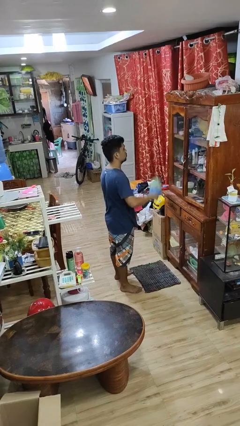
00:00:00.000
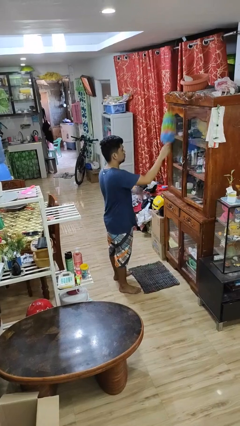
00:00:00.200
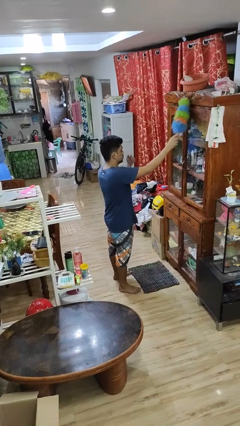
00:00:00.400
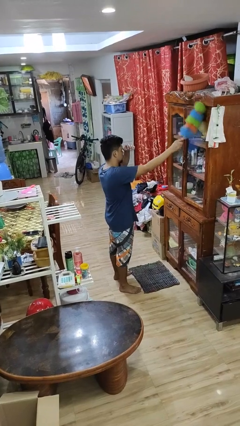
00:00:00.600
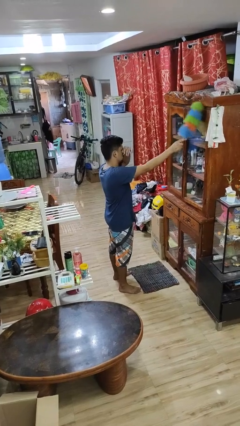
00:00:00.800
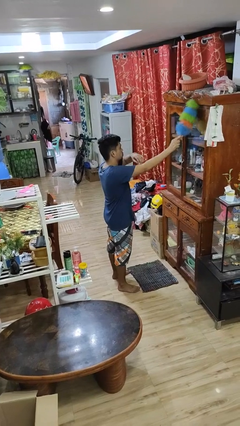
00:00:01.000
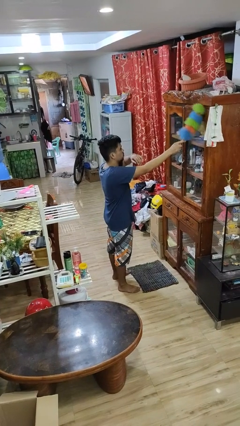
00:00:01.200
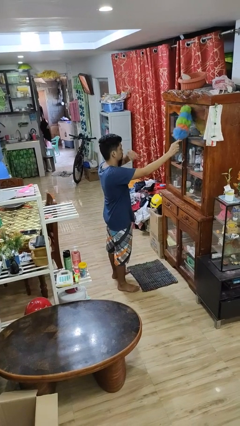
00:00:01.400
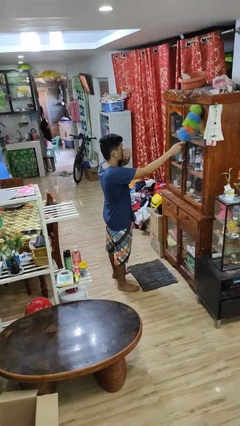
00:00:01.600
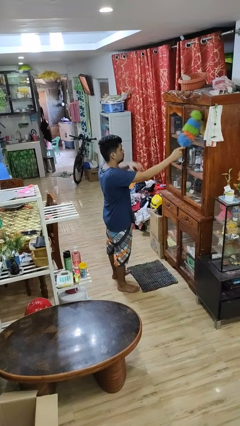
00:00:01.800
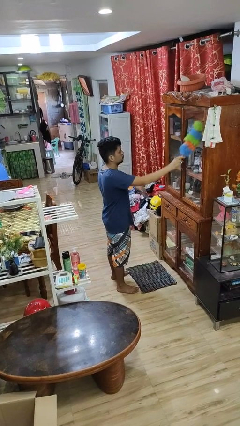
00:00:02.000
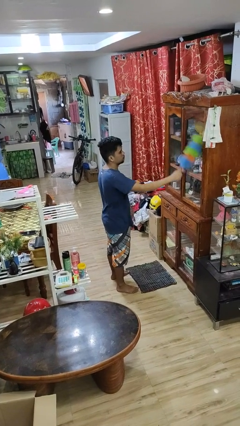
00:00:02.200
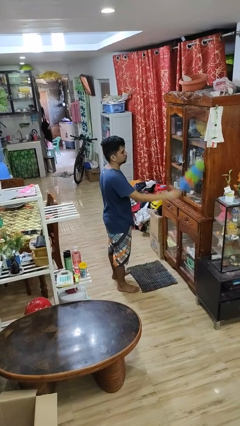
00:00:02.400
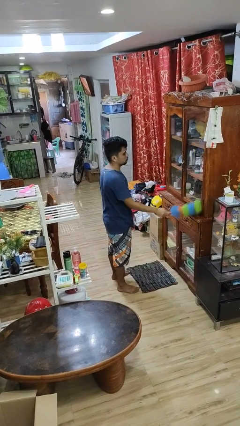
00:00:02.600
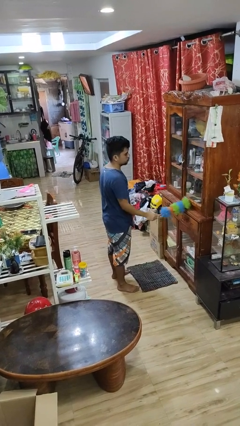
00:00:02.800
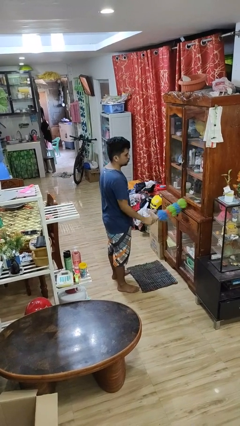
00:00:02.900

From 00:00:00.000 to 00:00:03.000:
person dusts furniture

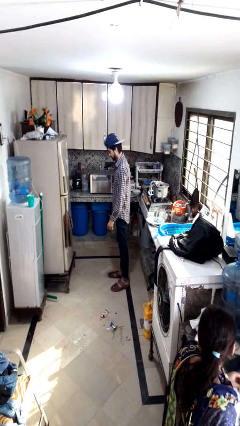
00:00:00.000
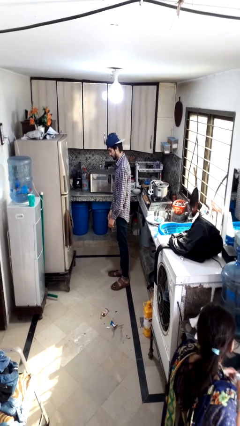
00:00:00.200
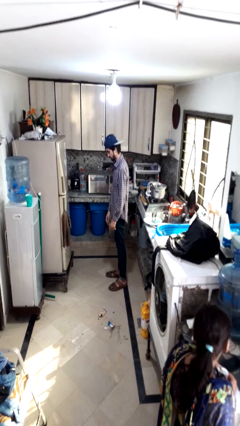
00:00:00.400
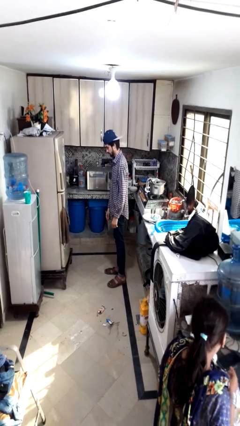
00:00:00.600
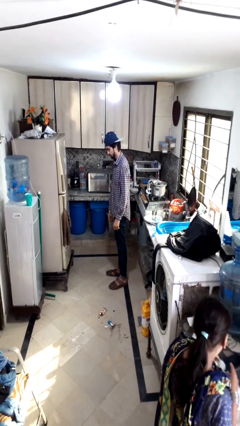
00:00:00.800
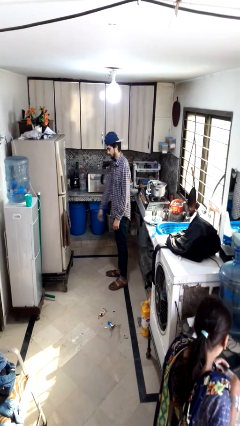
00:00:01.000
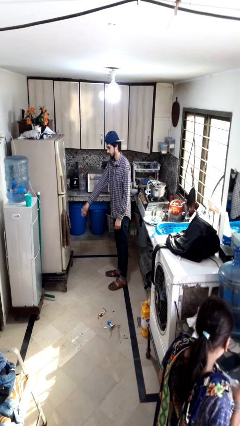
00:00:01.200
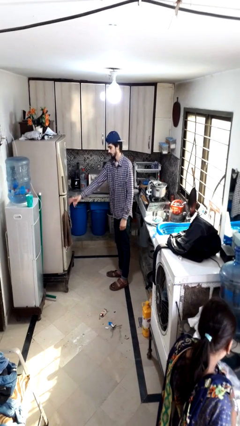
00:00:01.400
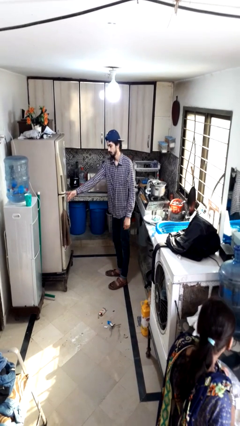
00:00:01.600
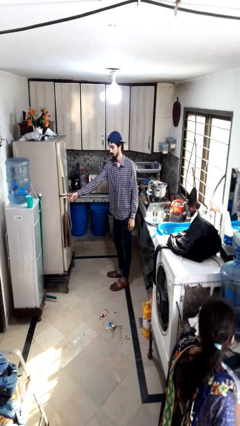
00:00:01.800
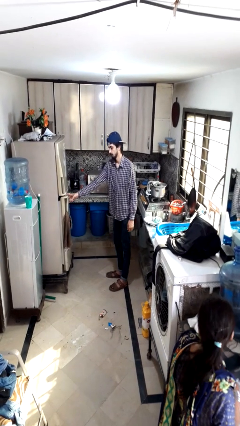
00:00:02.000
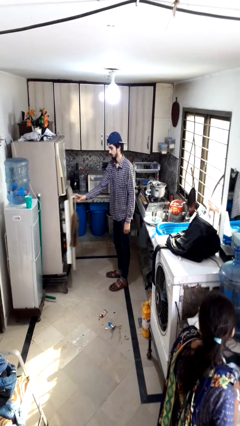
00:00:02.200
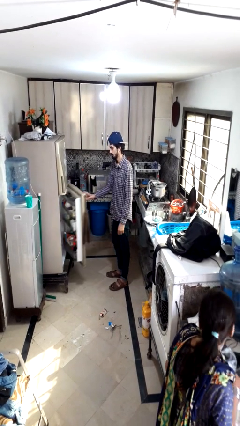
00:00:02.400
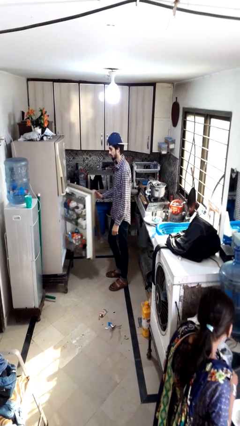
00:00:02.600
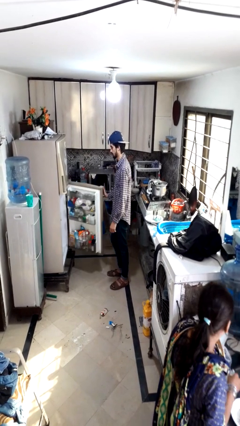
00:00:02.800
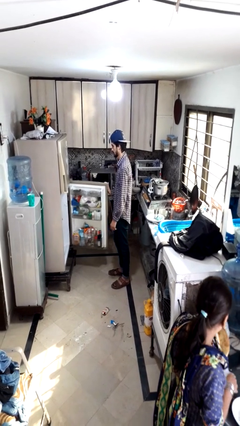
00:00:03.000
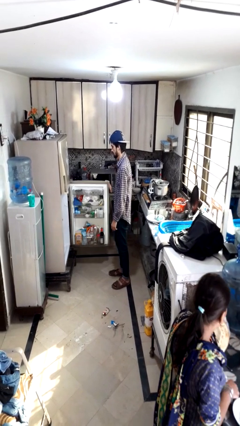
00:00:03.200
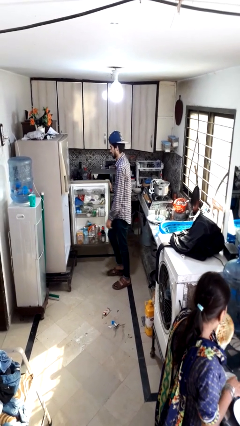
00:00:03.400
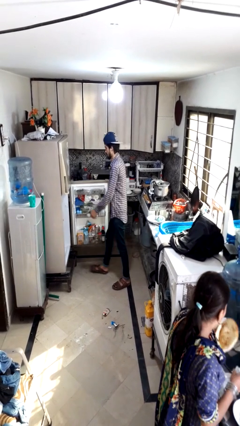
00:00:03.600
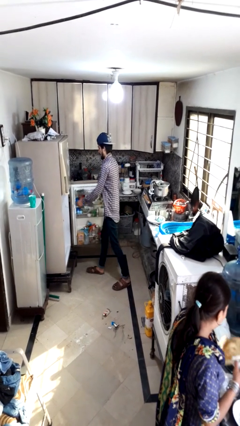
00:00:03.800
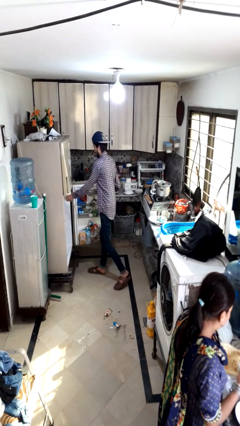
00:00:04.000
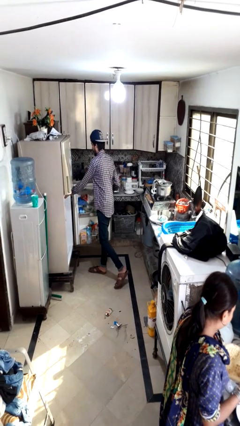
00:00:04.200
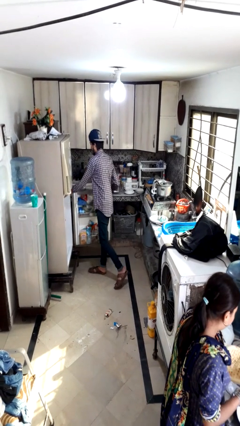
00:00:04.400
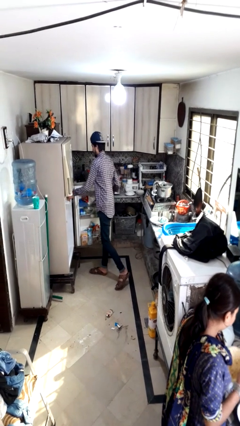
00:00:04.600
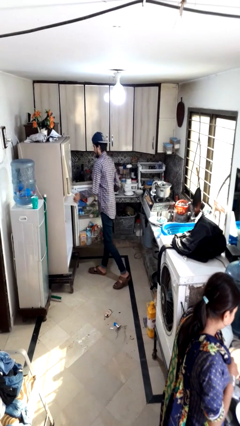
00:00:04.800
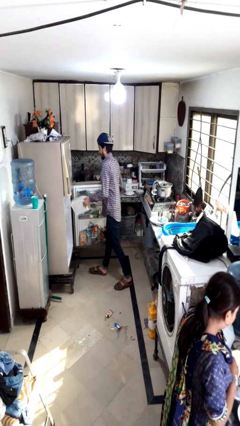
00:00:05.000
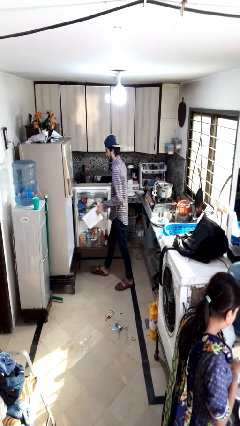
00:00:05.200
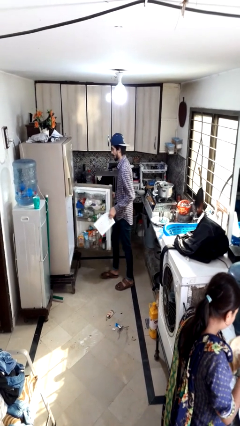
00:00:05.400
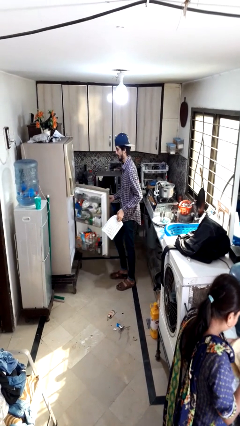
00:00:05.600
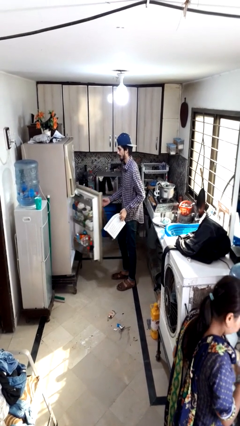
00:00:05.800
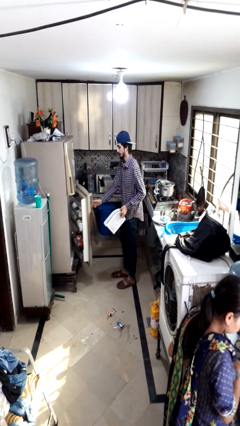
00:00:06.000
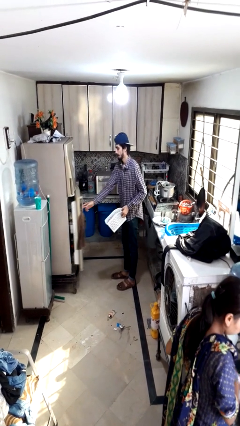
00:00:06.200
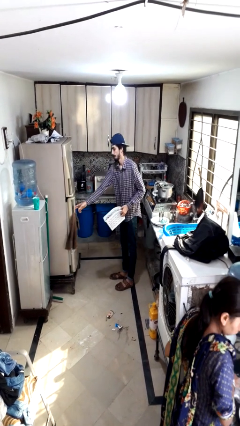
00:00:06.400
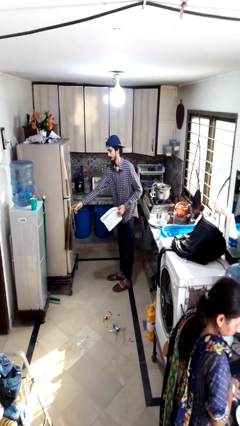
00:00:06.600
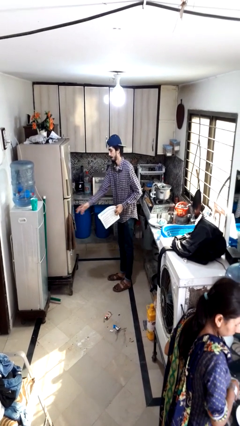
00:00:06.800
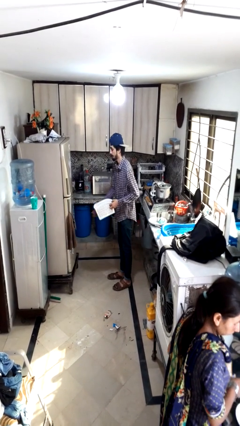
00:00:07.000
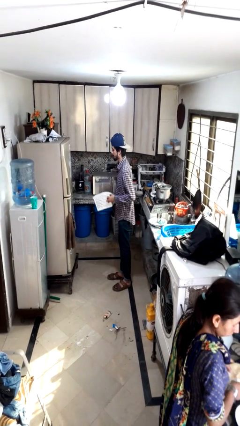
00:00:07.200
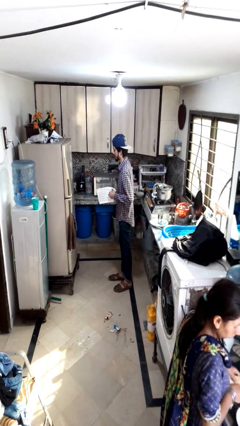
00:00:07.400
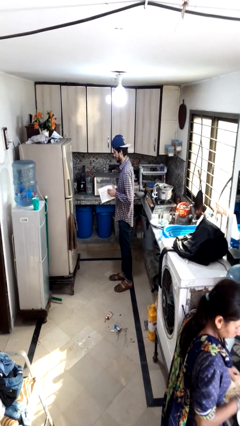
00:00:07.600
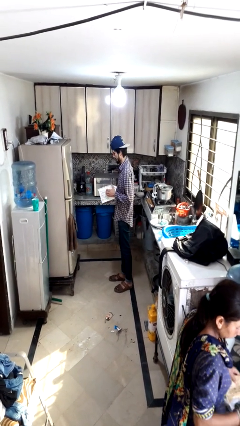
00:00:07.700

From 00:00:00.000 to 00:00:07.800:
person takes object from refrigerator

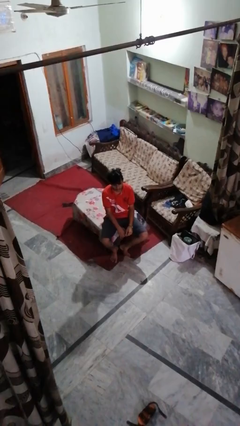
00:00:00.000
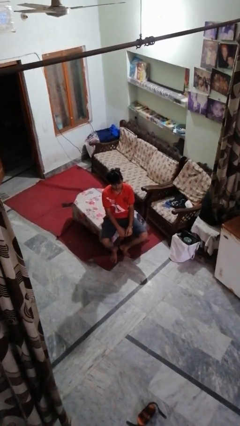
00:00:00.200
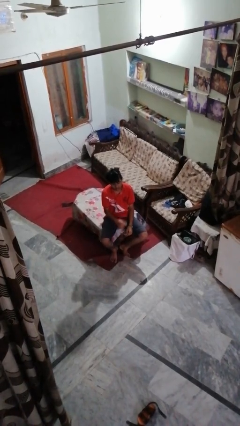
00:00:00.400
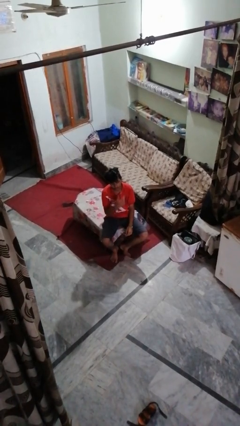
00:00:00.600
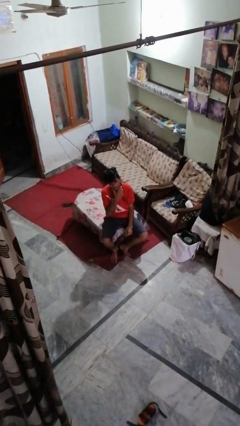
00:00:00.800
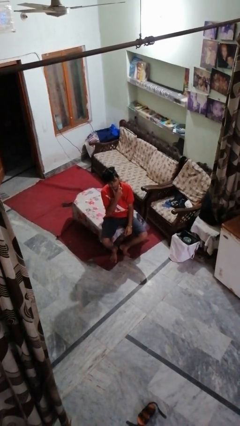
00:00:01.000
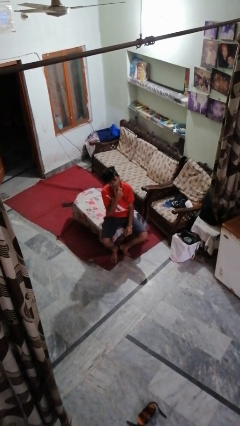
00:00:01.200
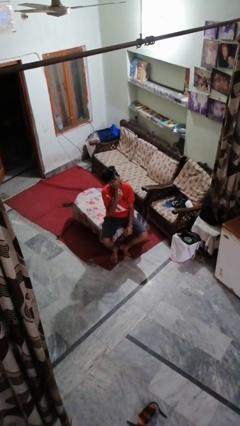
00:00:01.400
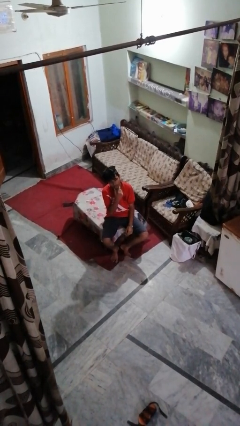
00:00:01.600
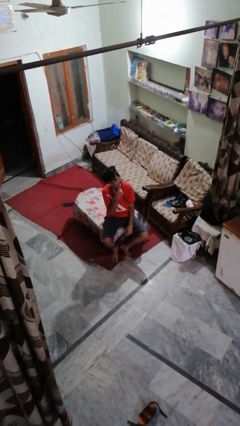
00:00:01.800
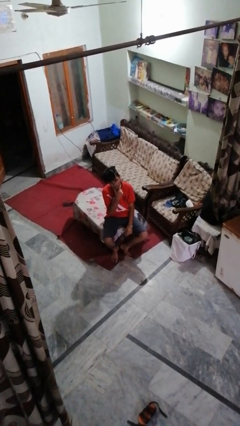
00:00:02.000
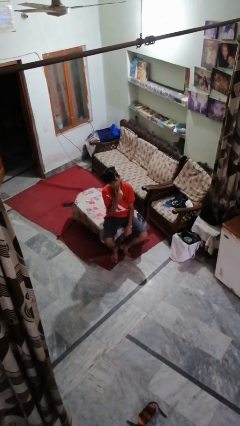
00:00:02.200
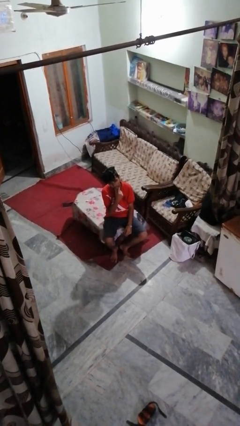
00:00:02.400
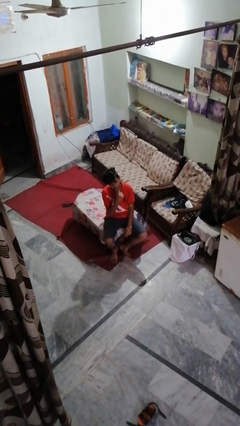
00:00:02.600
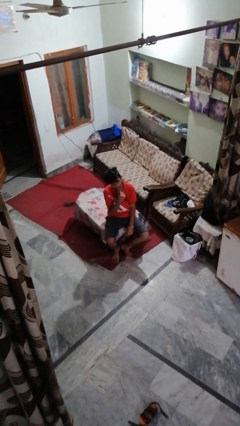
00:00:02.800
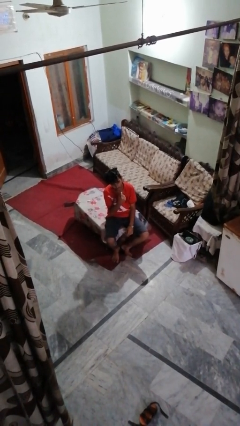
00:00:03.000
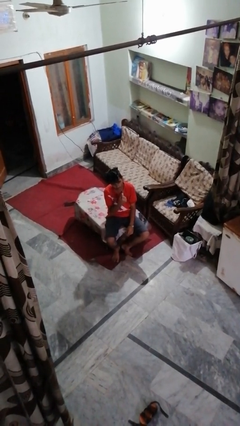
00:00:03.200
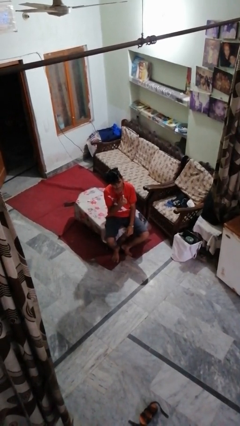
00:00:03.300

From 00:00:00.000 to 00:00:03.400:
person strokes chin

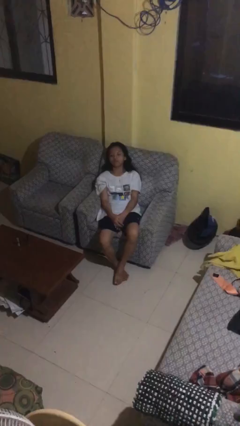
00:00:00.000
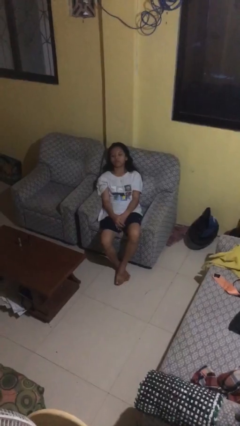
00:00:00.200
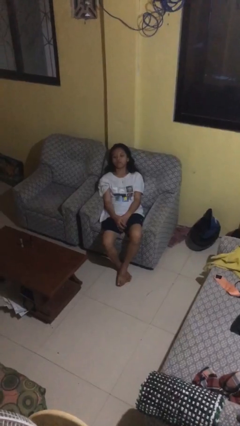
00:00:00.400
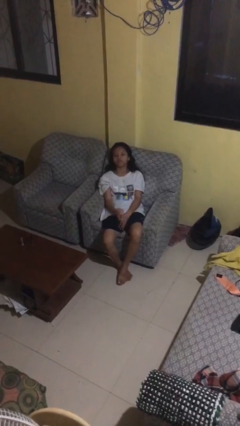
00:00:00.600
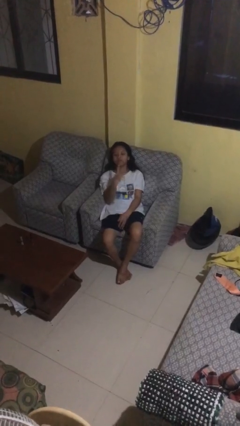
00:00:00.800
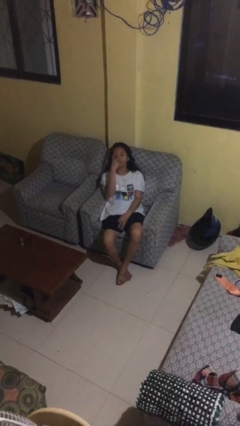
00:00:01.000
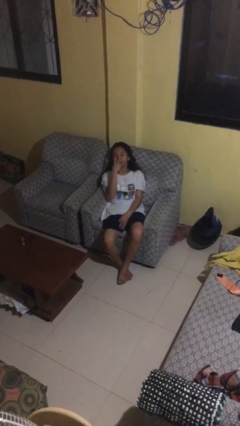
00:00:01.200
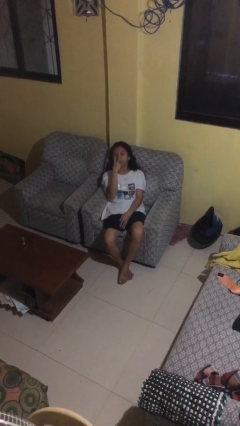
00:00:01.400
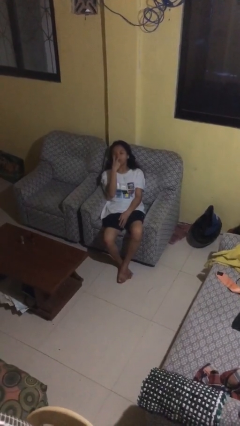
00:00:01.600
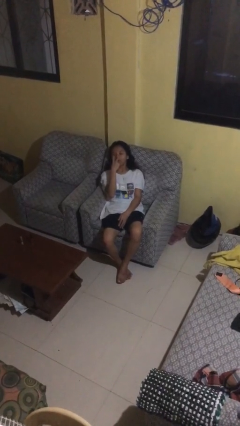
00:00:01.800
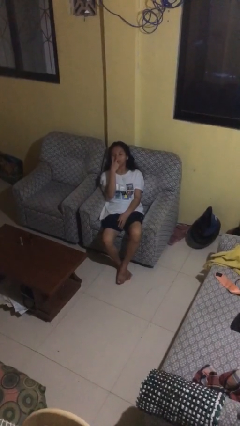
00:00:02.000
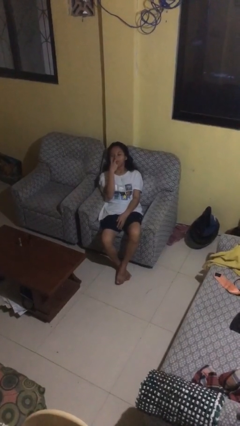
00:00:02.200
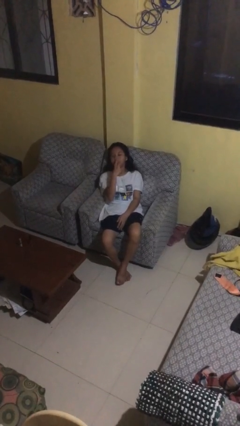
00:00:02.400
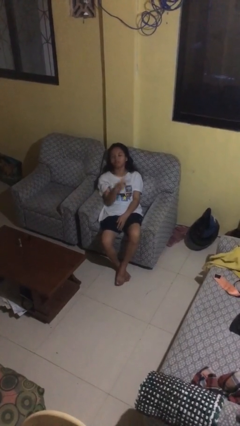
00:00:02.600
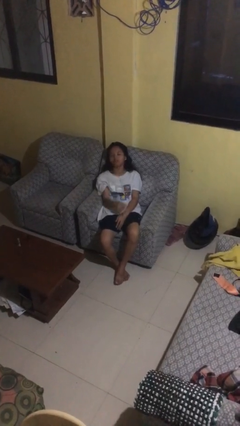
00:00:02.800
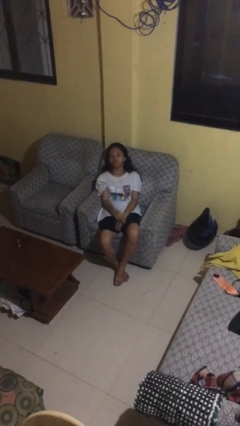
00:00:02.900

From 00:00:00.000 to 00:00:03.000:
person gestures watch closely
